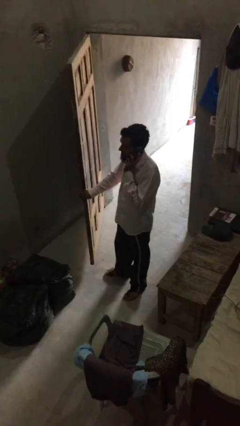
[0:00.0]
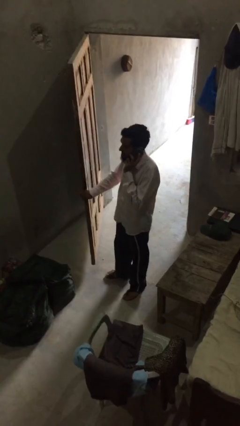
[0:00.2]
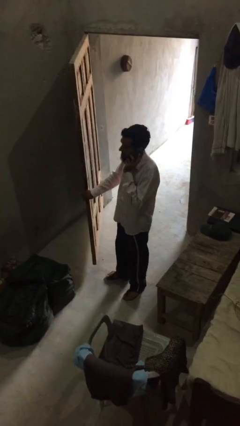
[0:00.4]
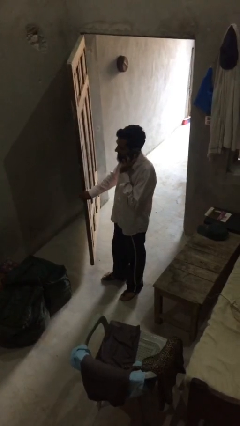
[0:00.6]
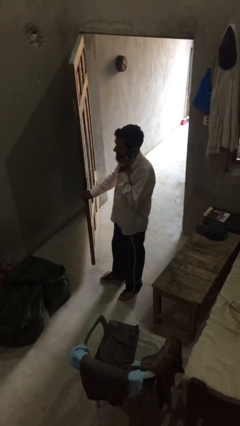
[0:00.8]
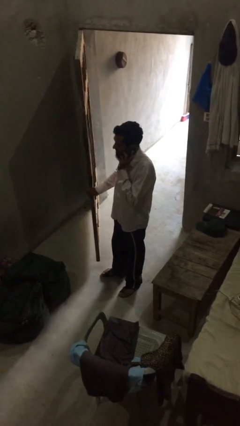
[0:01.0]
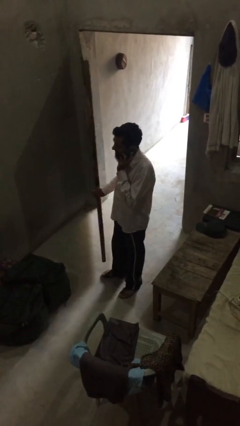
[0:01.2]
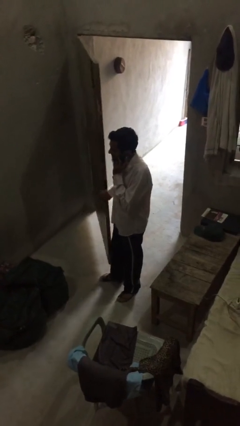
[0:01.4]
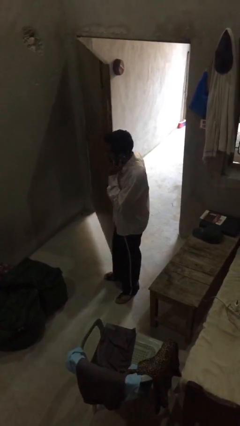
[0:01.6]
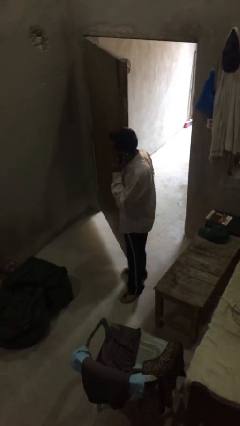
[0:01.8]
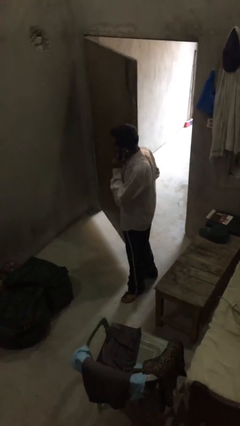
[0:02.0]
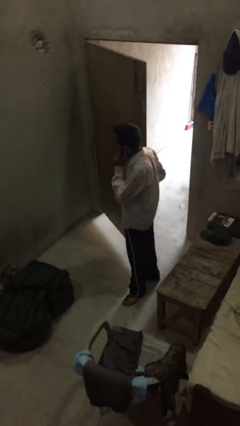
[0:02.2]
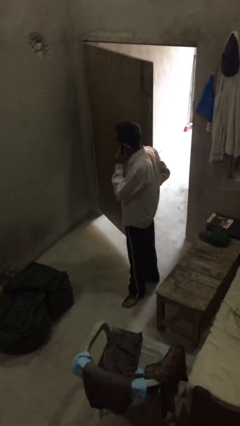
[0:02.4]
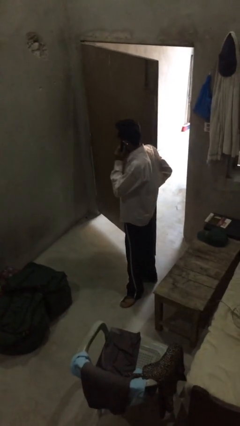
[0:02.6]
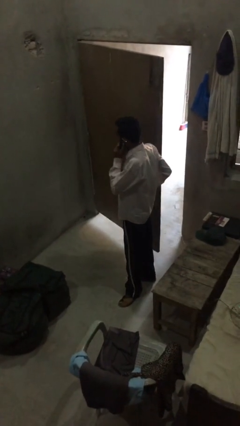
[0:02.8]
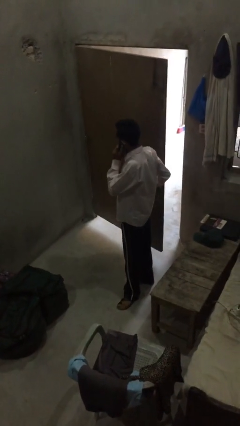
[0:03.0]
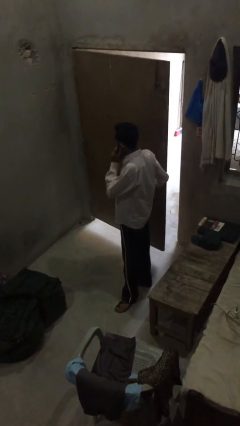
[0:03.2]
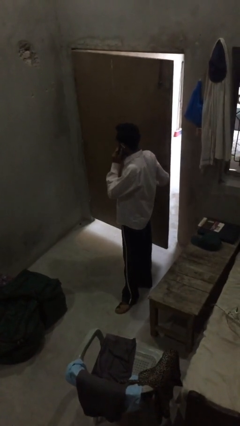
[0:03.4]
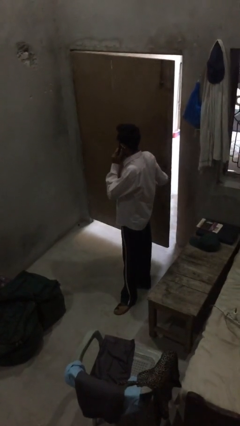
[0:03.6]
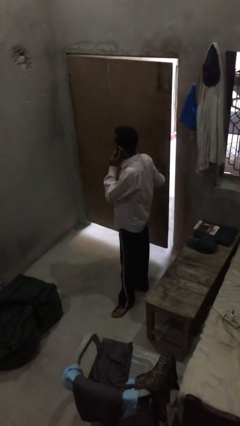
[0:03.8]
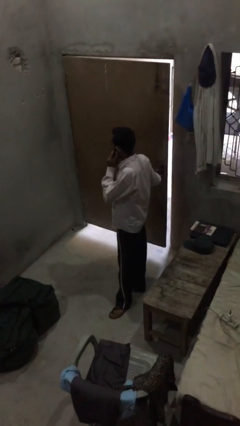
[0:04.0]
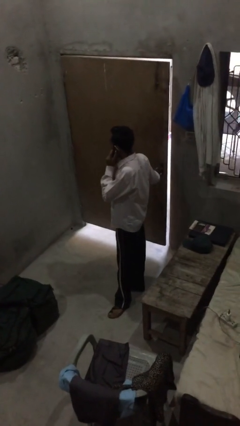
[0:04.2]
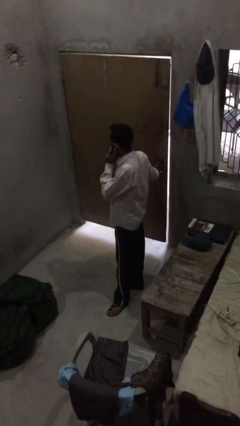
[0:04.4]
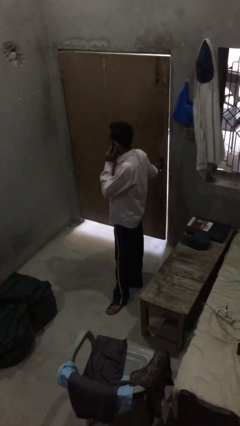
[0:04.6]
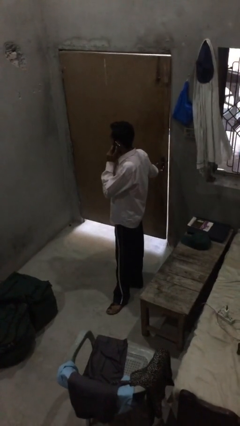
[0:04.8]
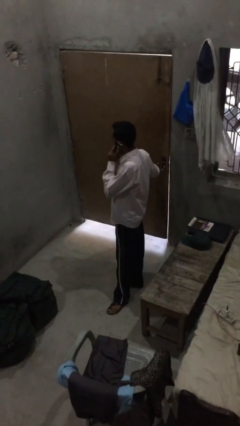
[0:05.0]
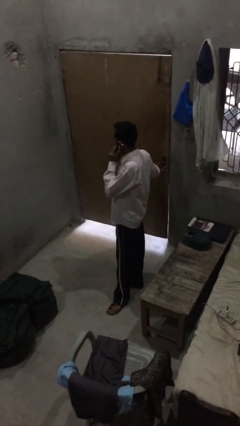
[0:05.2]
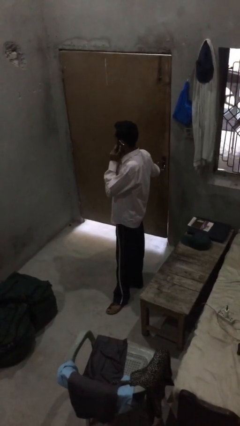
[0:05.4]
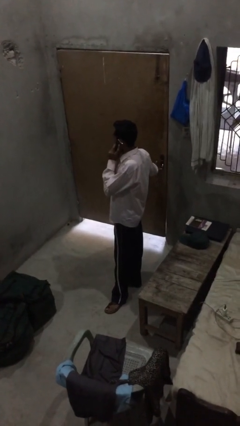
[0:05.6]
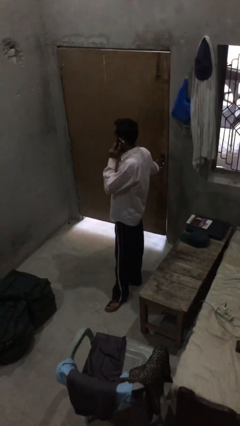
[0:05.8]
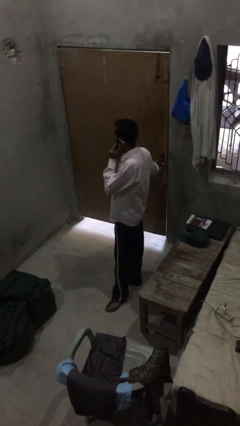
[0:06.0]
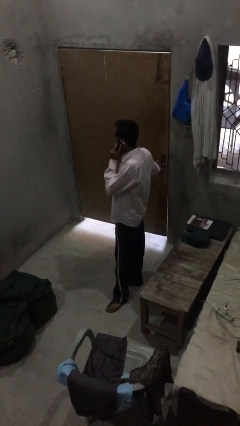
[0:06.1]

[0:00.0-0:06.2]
person closes facility door

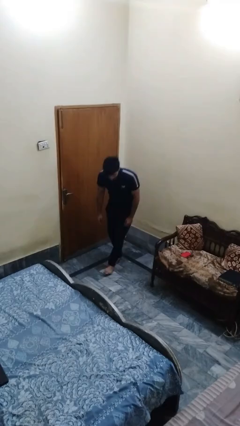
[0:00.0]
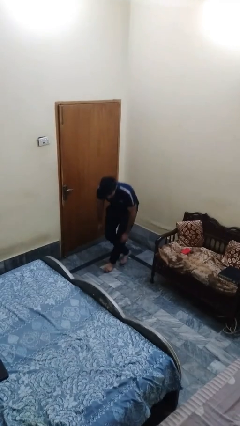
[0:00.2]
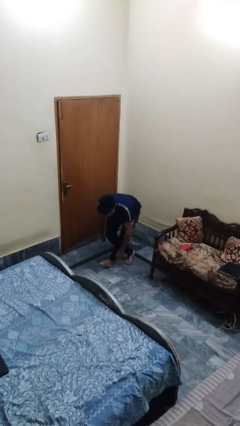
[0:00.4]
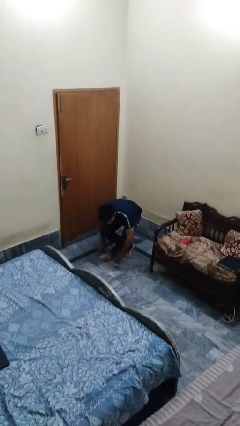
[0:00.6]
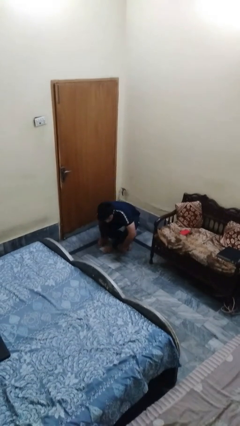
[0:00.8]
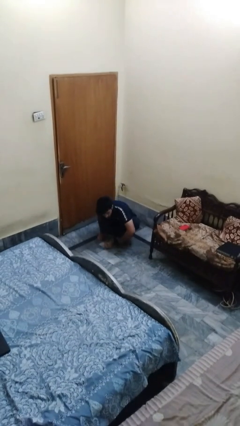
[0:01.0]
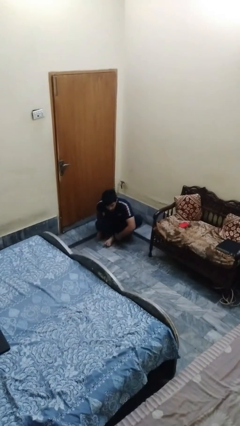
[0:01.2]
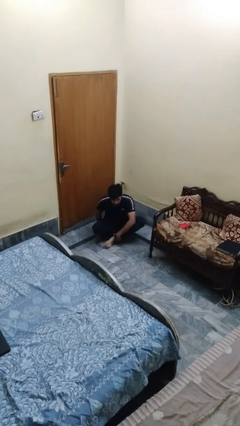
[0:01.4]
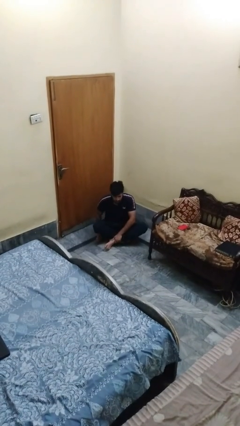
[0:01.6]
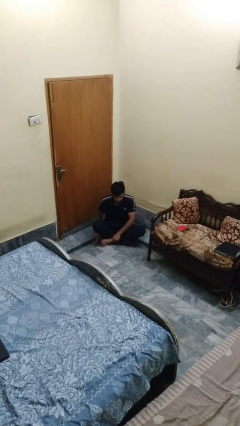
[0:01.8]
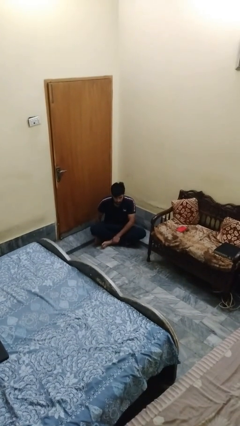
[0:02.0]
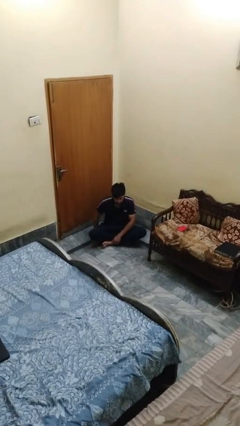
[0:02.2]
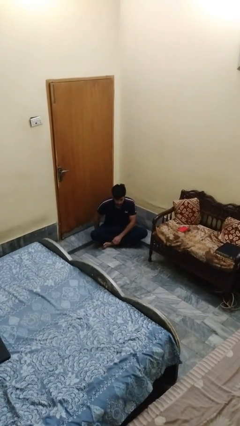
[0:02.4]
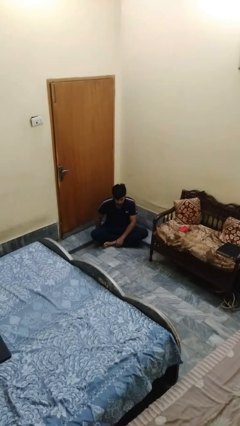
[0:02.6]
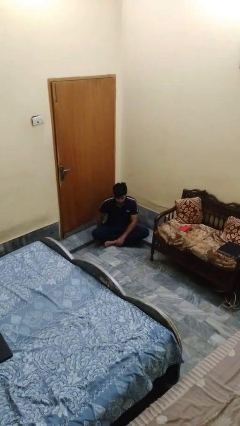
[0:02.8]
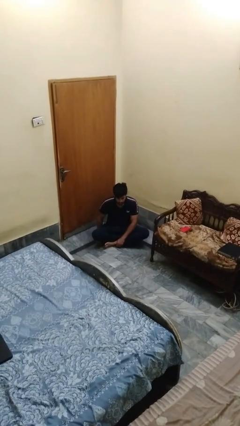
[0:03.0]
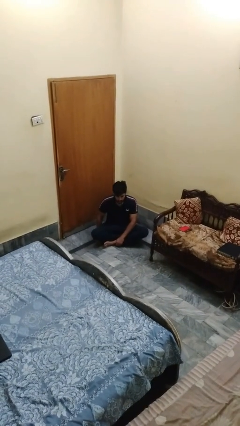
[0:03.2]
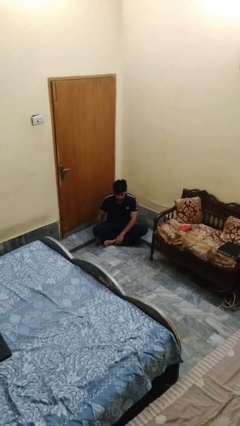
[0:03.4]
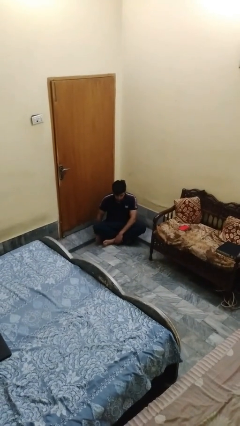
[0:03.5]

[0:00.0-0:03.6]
person sits crisscross

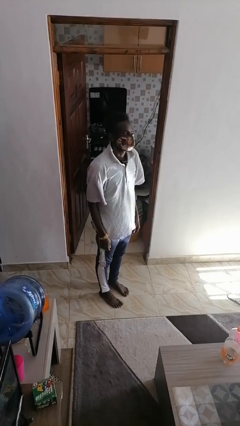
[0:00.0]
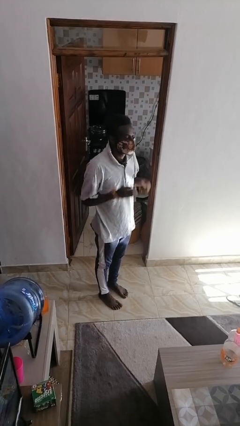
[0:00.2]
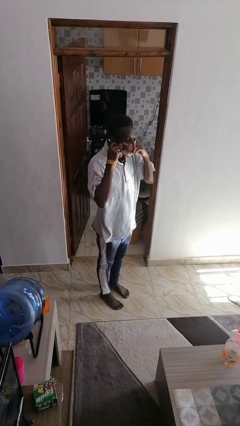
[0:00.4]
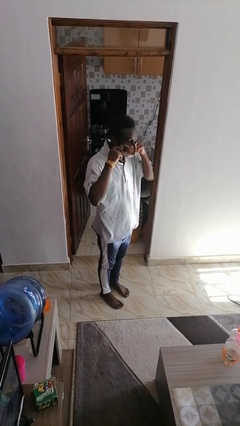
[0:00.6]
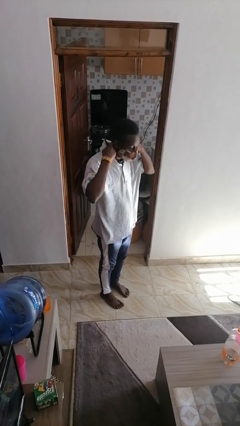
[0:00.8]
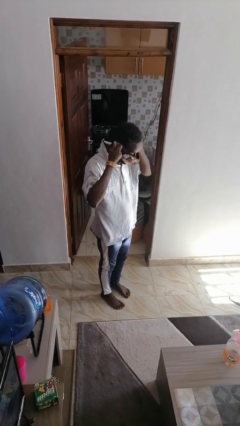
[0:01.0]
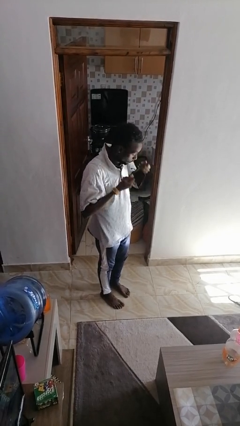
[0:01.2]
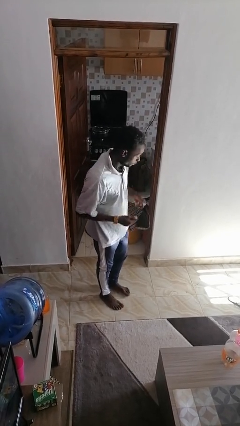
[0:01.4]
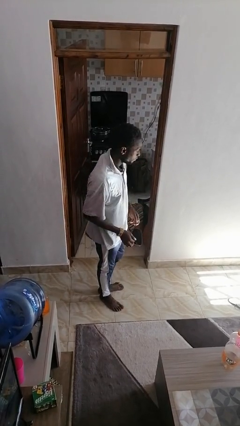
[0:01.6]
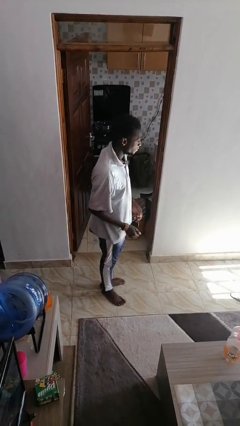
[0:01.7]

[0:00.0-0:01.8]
person takes off facemask

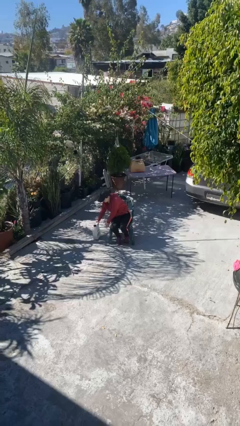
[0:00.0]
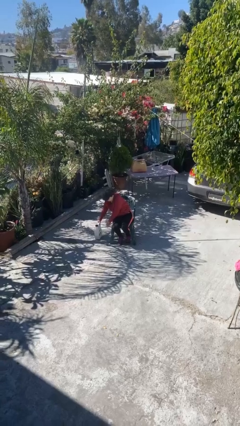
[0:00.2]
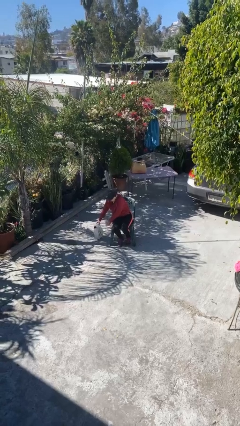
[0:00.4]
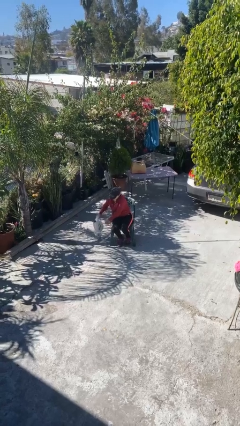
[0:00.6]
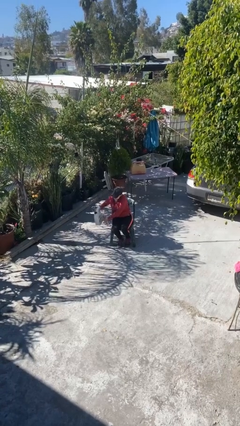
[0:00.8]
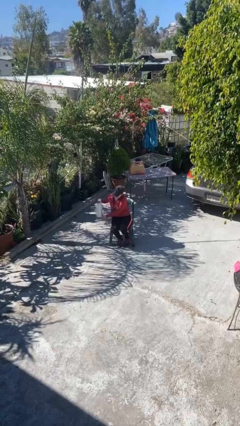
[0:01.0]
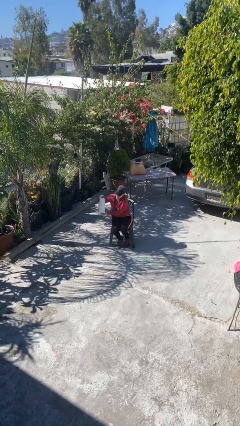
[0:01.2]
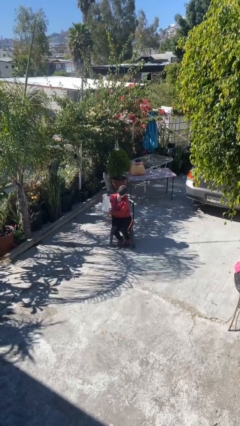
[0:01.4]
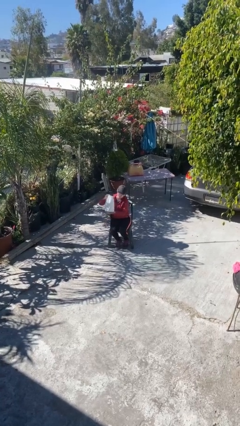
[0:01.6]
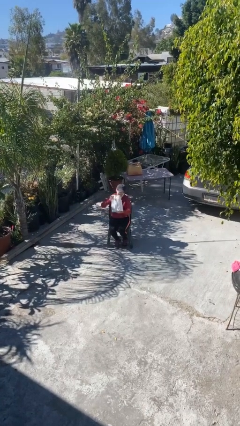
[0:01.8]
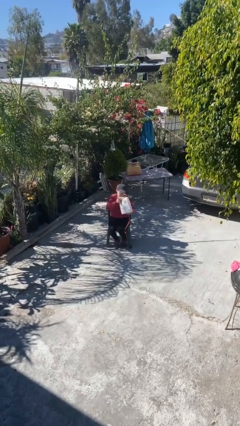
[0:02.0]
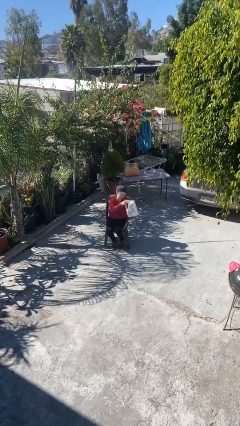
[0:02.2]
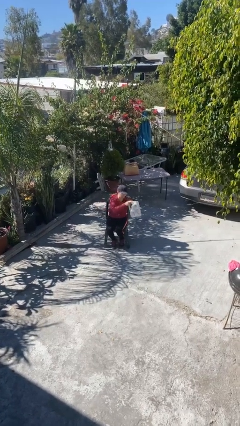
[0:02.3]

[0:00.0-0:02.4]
person picks up object from floor

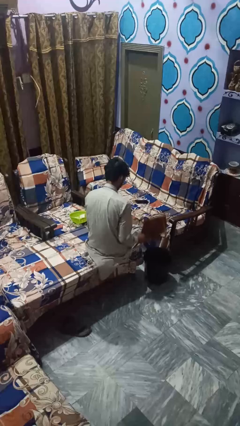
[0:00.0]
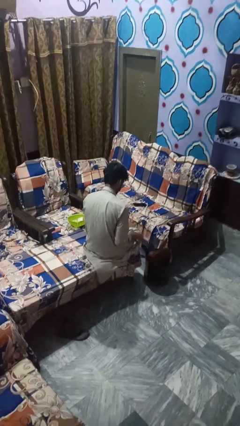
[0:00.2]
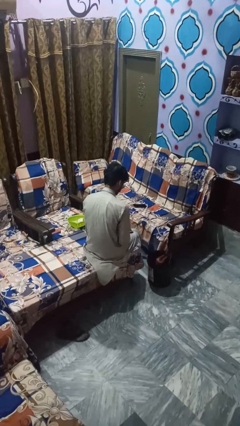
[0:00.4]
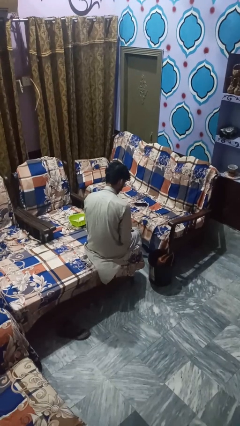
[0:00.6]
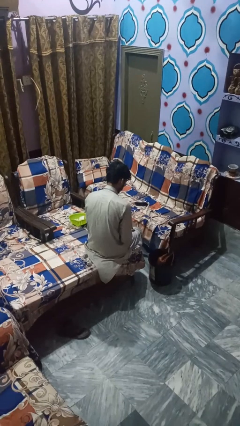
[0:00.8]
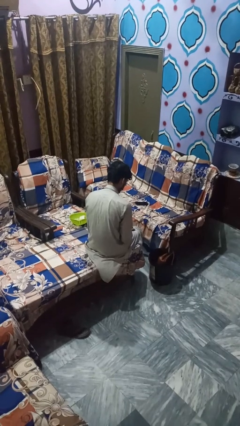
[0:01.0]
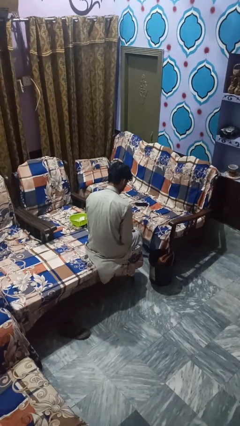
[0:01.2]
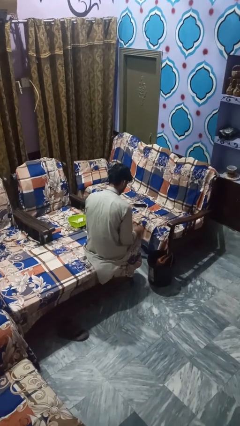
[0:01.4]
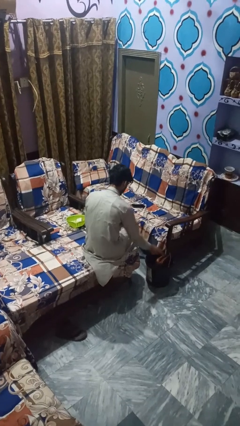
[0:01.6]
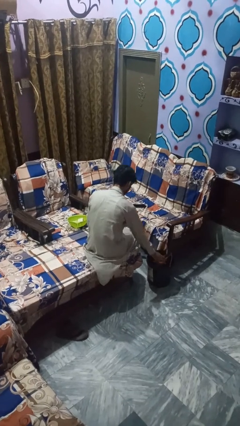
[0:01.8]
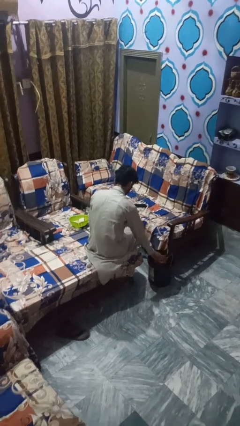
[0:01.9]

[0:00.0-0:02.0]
person puts object into basket

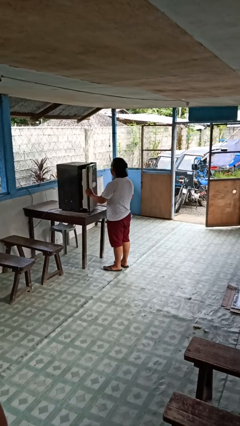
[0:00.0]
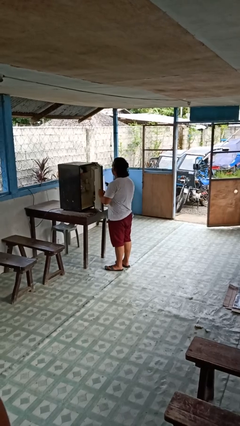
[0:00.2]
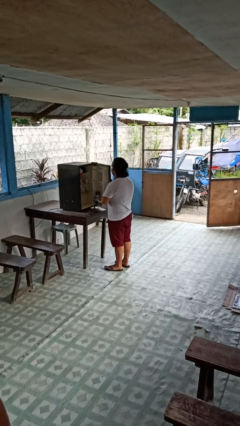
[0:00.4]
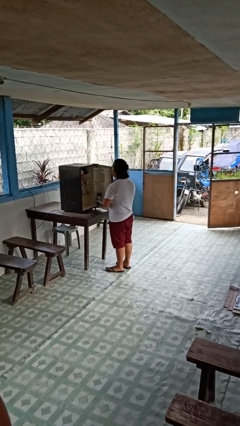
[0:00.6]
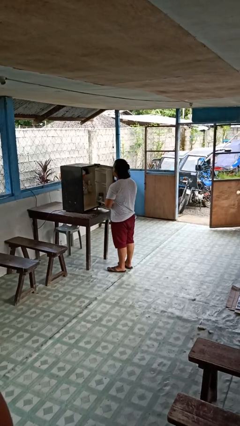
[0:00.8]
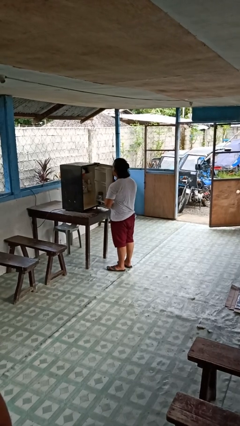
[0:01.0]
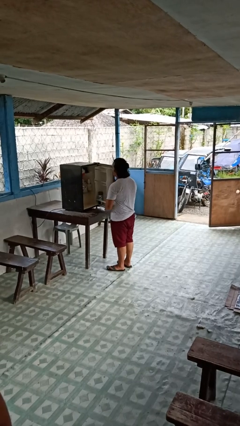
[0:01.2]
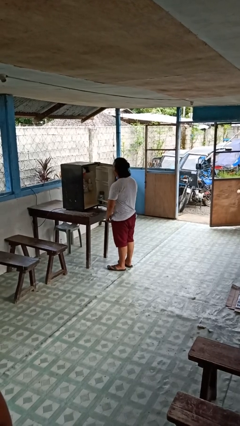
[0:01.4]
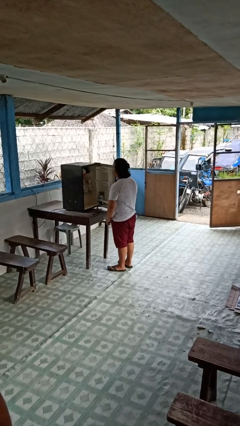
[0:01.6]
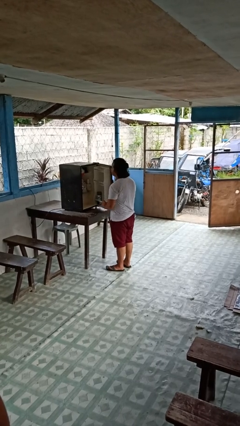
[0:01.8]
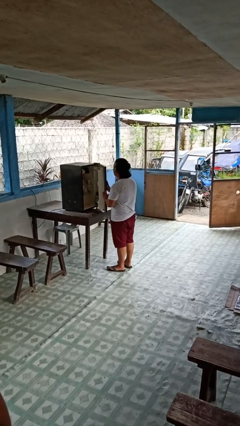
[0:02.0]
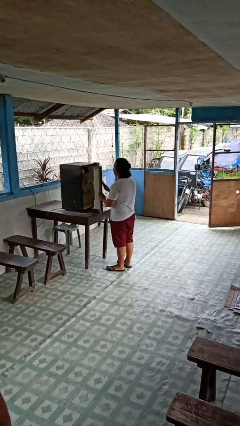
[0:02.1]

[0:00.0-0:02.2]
person opens refrigerator
